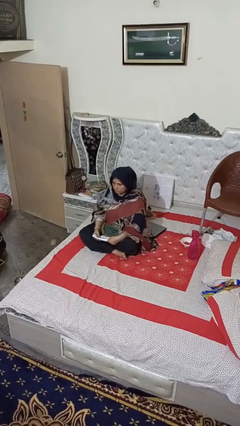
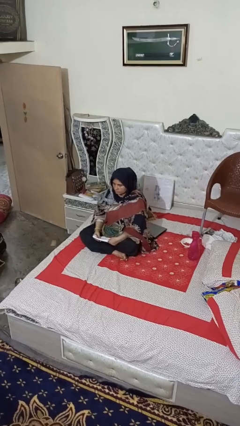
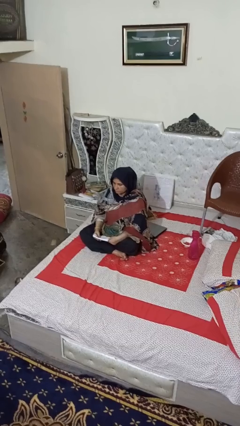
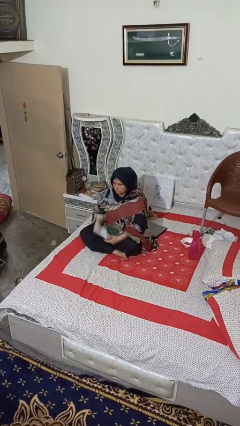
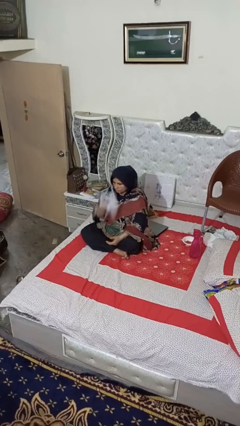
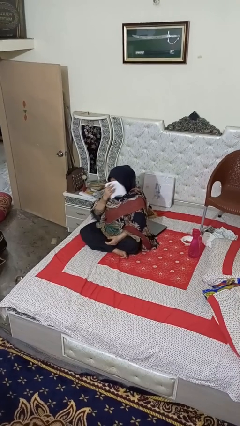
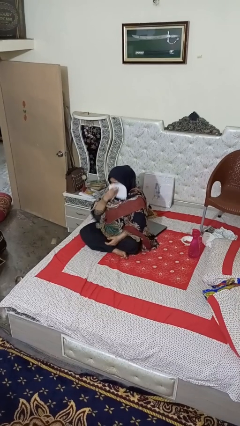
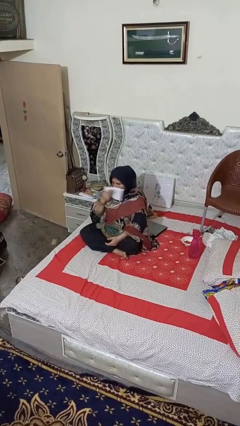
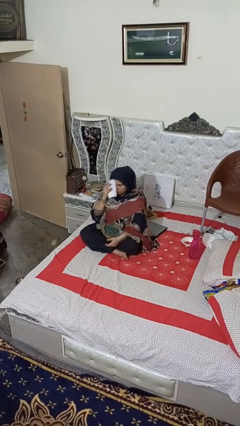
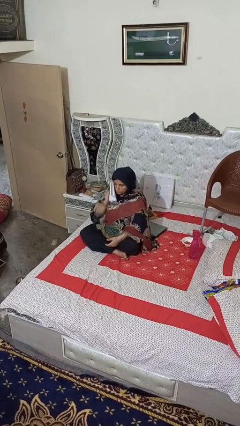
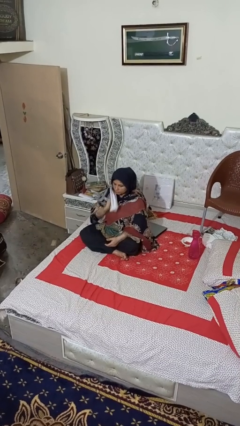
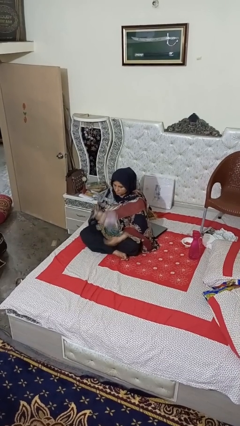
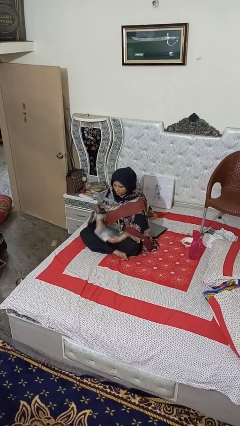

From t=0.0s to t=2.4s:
person wipes mouth with napkin

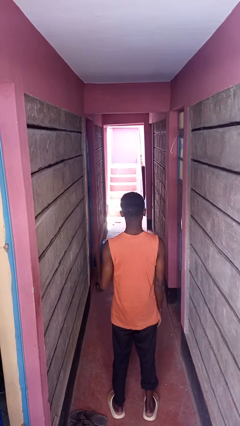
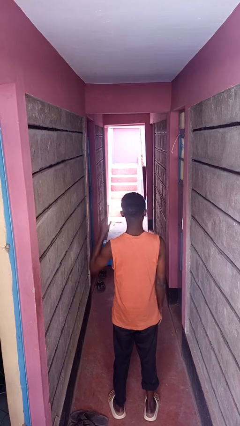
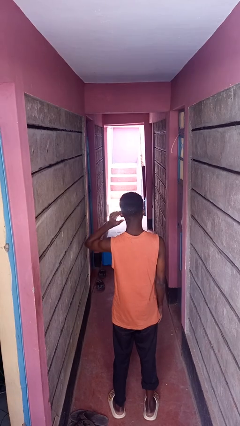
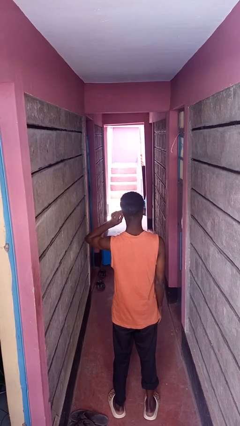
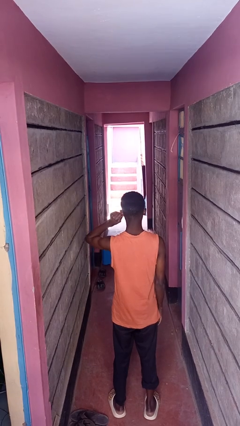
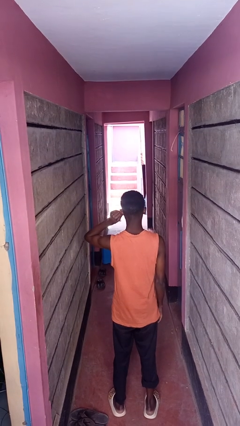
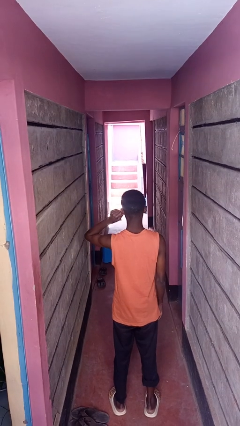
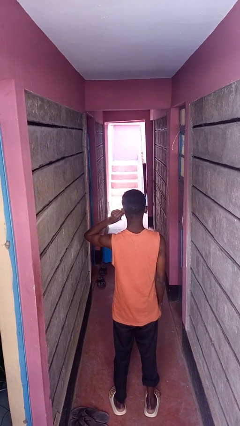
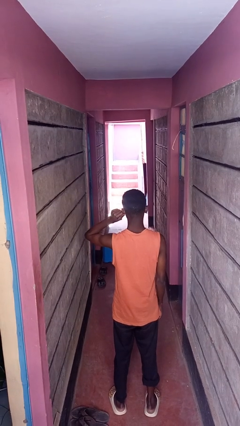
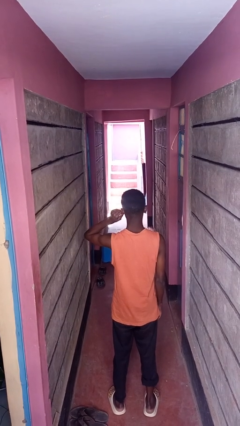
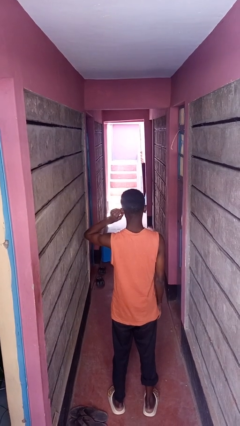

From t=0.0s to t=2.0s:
person touches earlobe

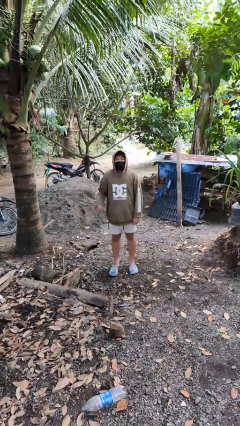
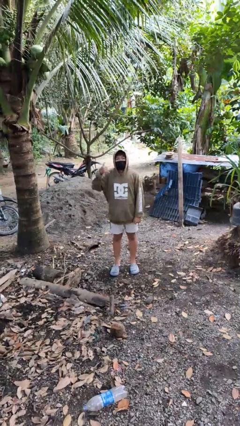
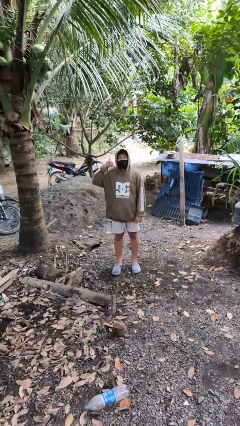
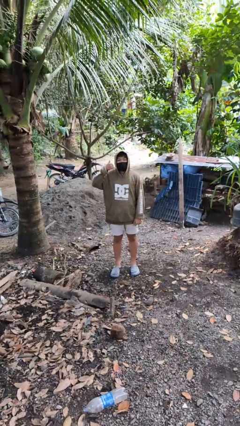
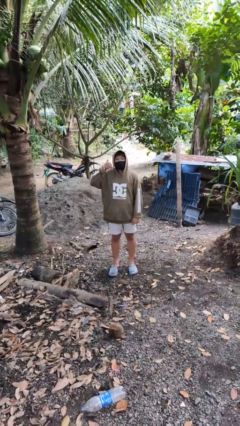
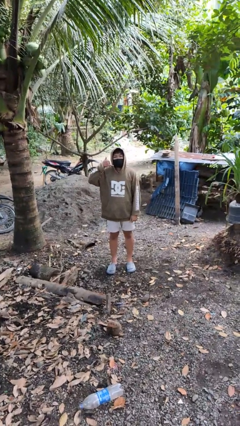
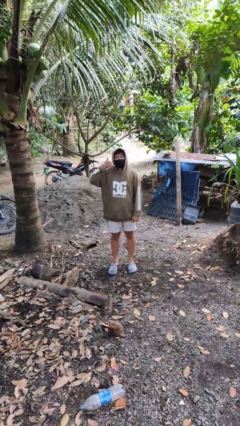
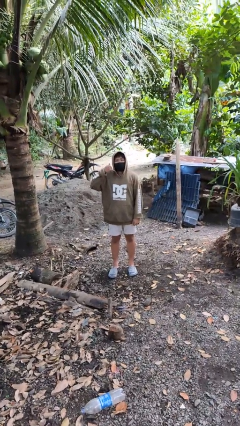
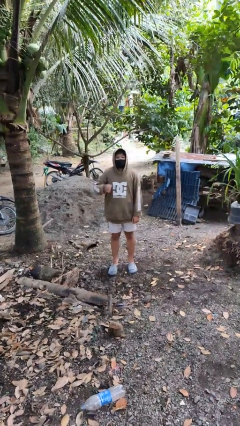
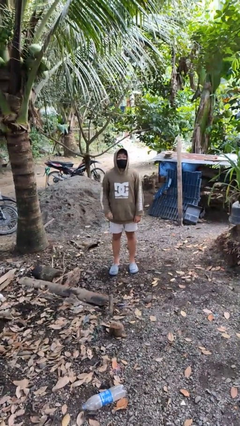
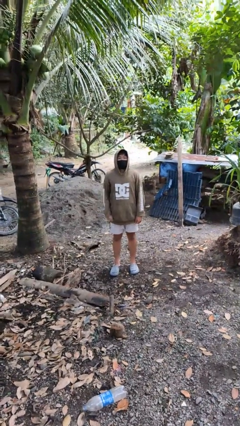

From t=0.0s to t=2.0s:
person gestures call me

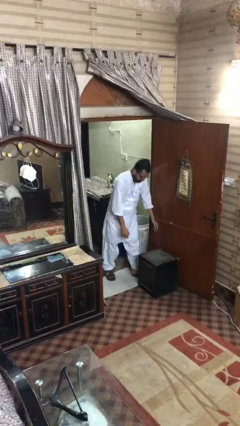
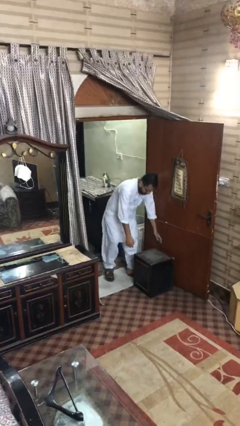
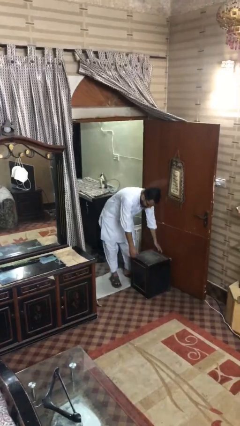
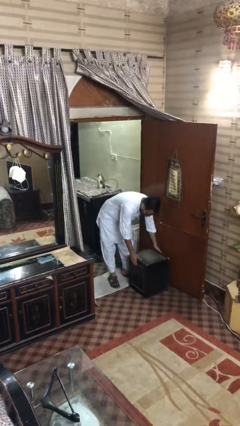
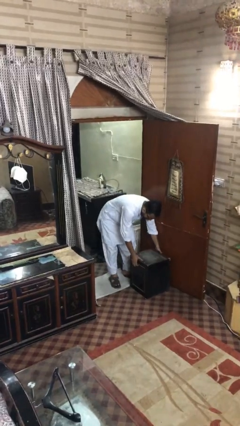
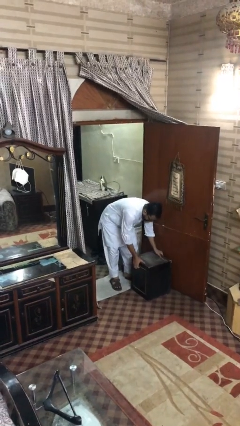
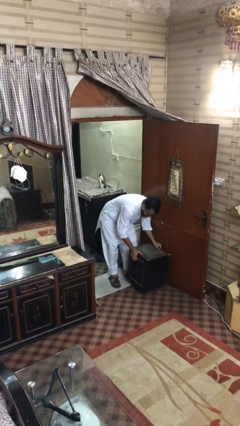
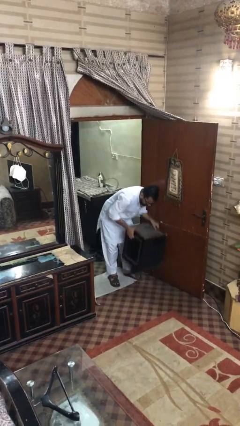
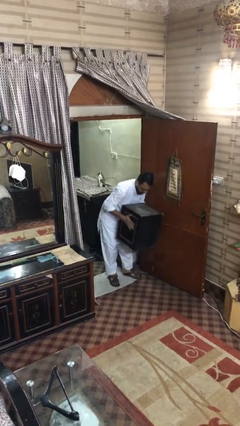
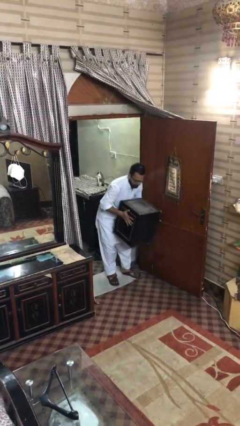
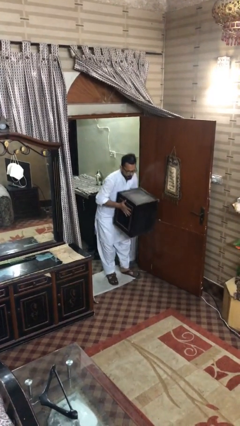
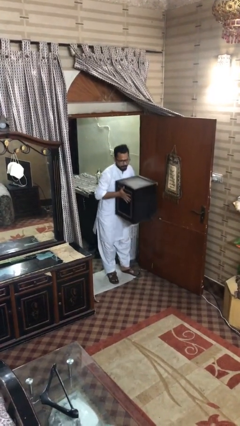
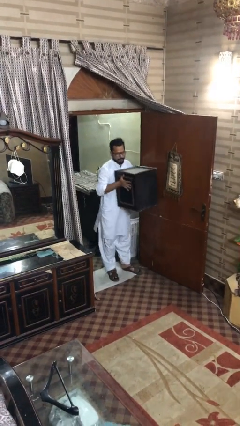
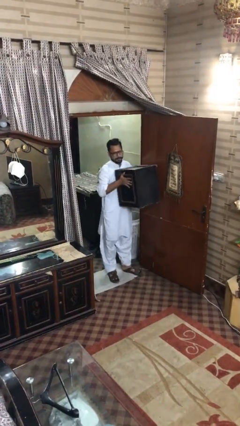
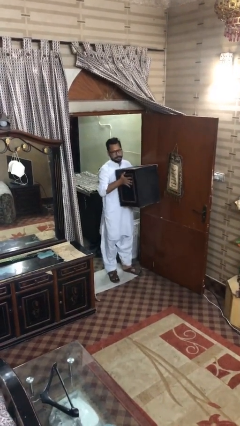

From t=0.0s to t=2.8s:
person picks up object from floor

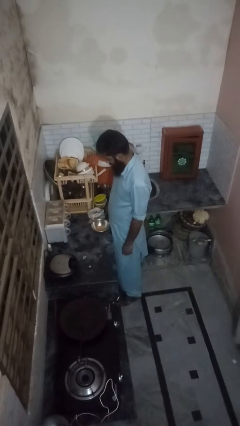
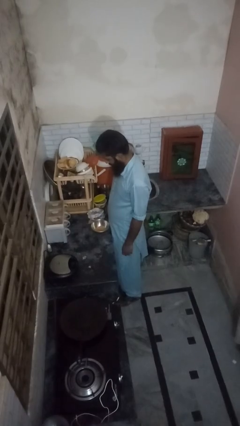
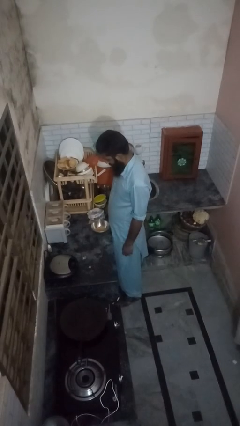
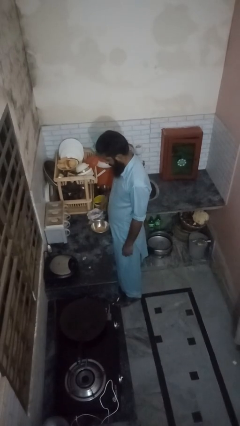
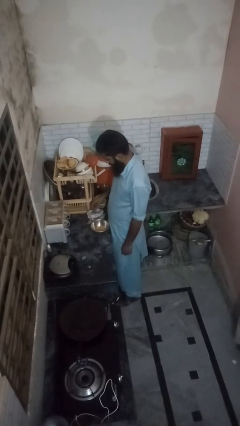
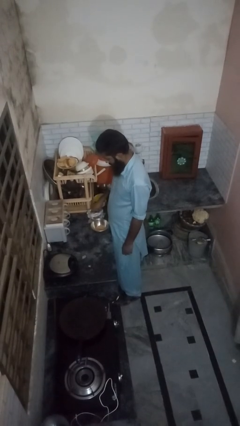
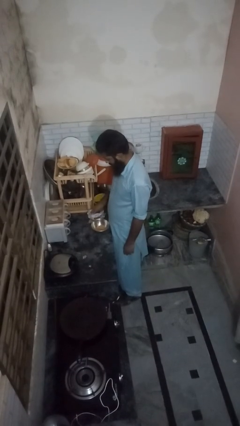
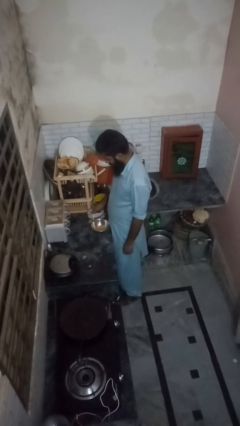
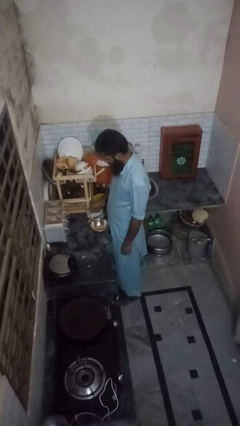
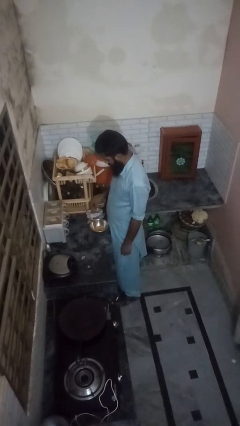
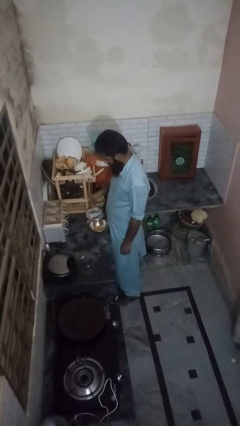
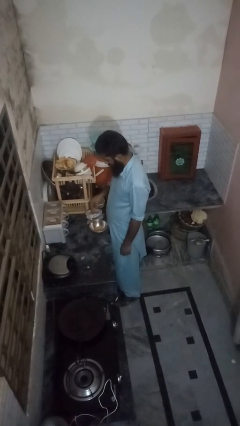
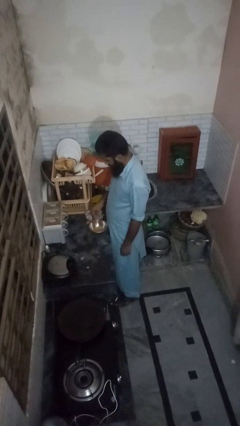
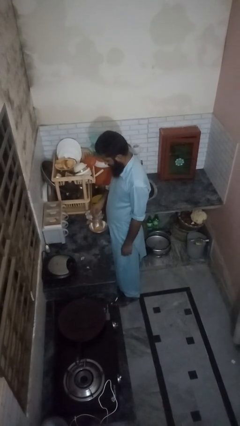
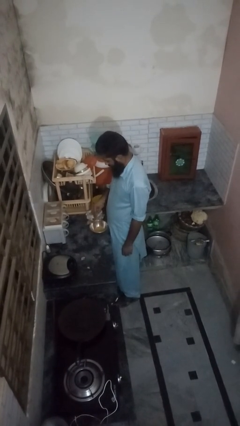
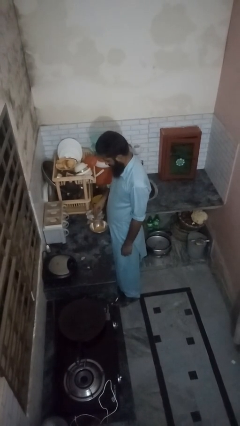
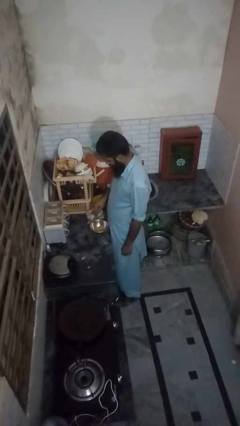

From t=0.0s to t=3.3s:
person pours into bowl

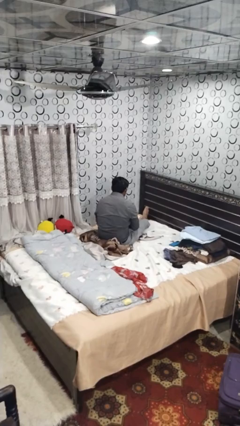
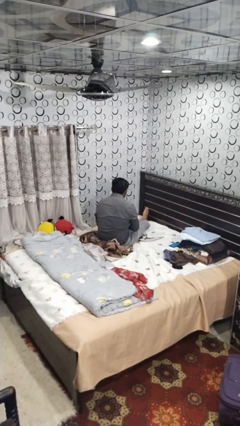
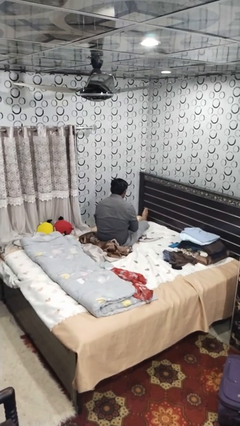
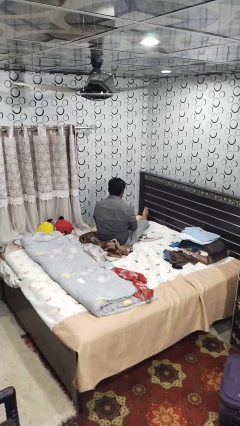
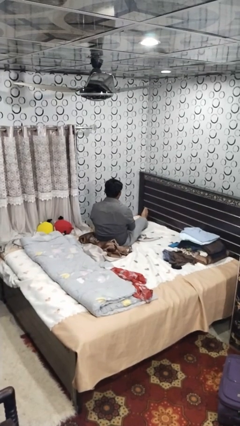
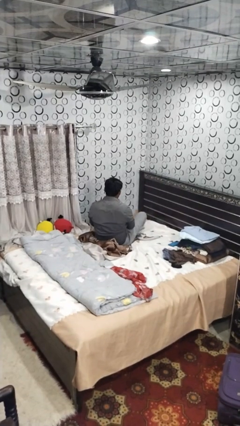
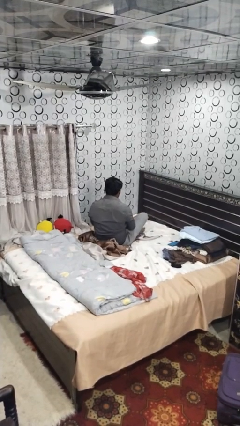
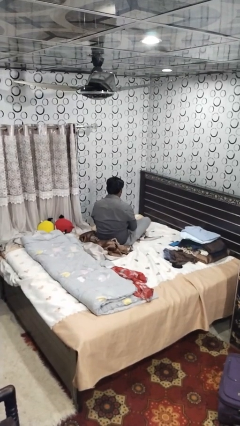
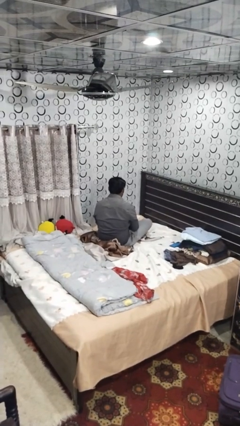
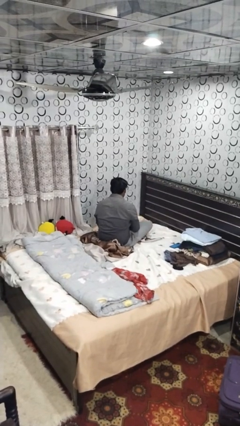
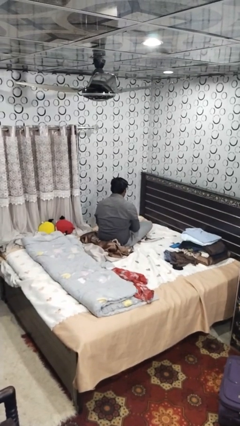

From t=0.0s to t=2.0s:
person crosses legs

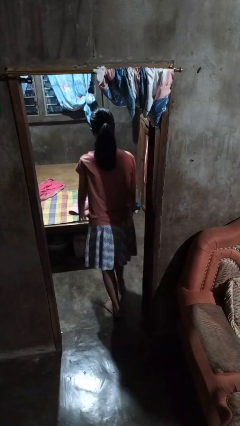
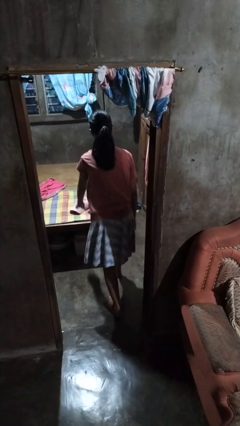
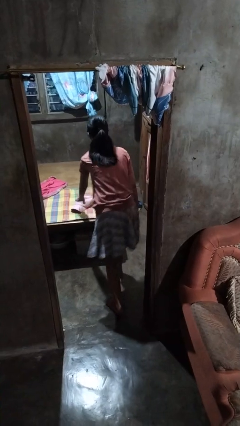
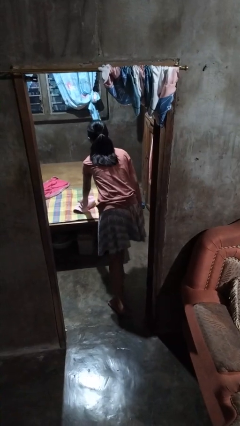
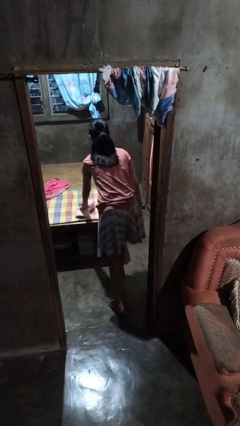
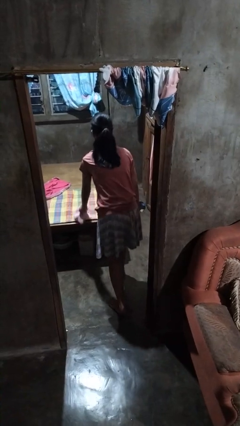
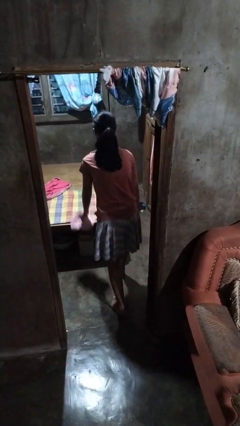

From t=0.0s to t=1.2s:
person picks up object from bed

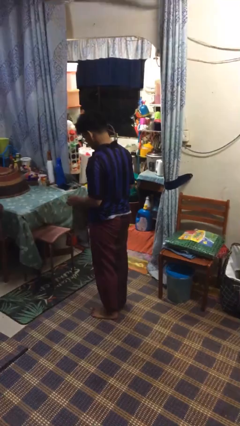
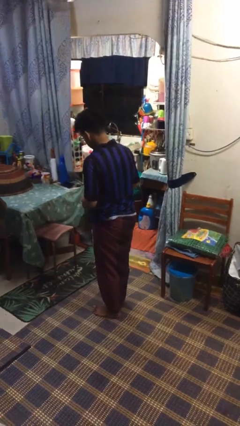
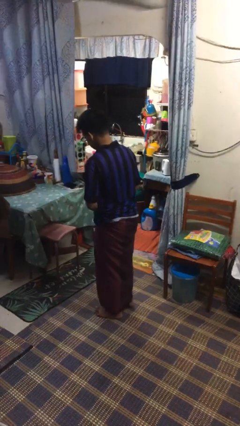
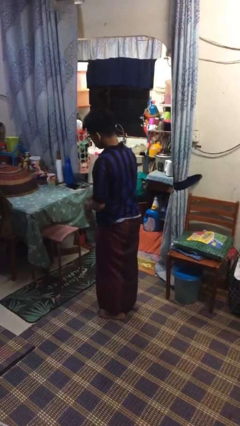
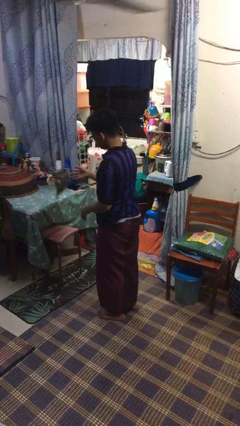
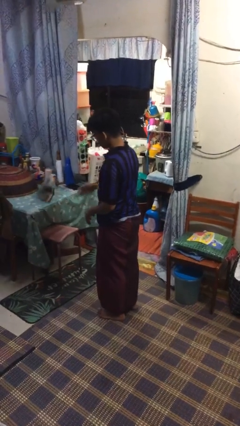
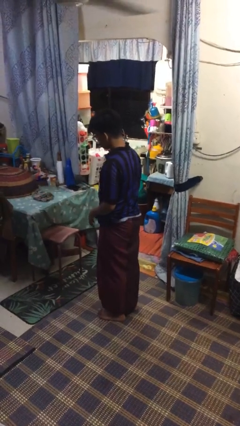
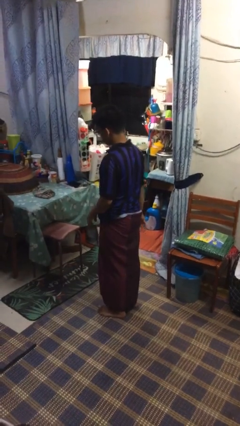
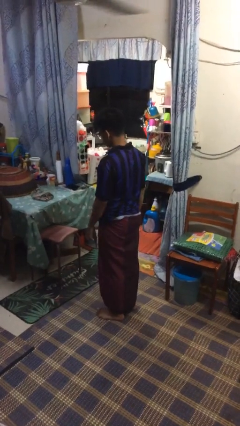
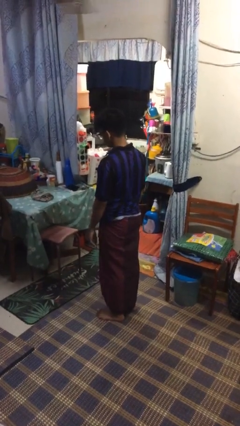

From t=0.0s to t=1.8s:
person throws object on table
